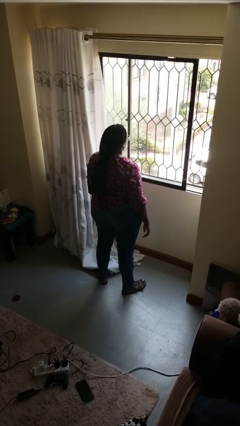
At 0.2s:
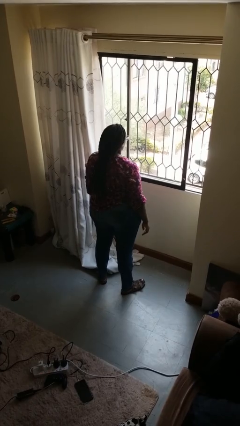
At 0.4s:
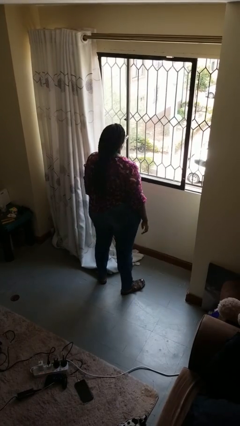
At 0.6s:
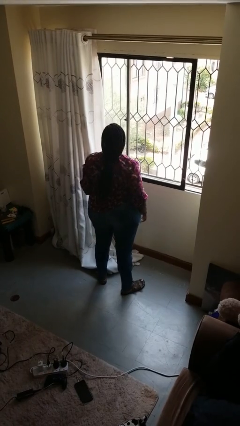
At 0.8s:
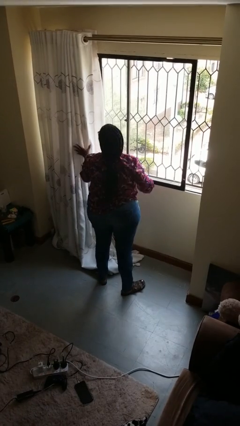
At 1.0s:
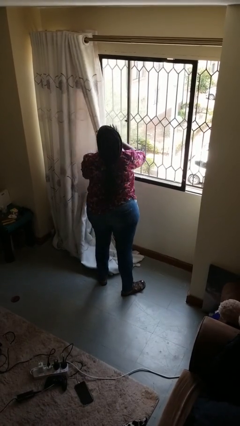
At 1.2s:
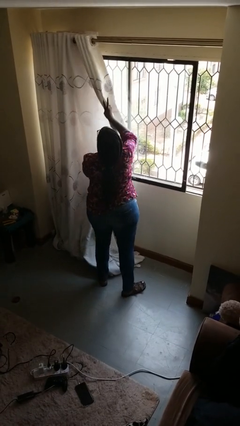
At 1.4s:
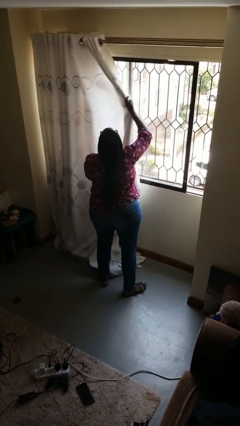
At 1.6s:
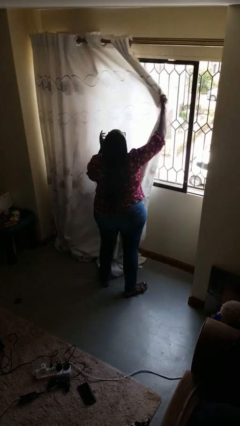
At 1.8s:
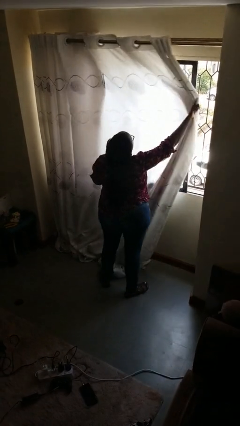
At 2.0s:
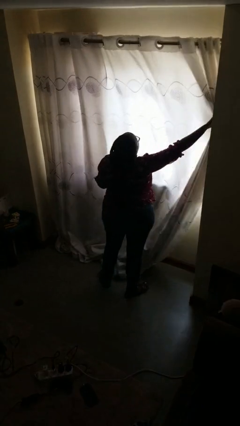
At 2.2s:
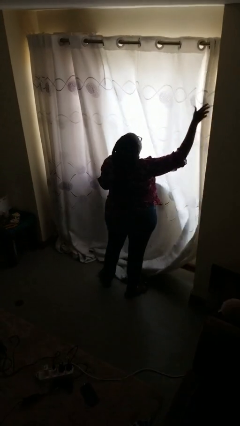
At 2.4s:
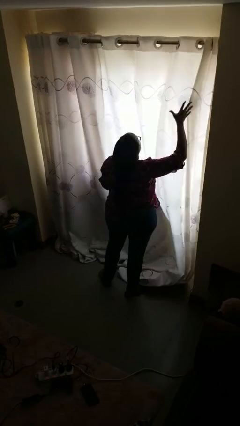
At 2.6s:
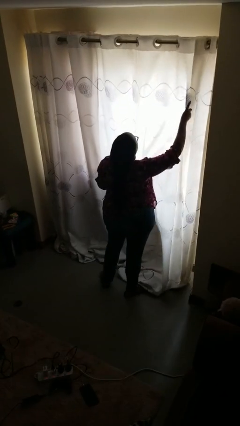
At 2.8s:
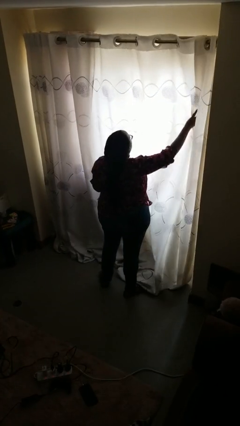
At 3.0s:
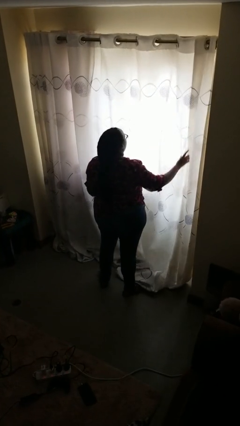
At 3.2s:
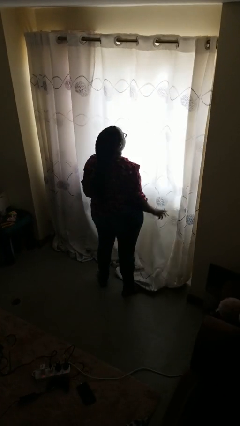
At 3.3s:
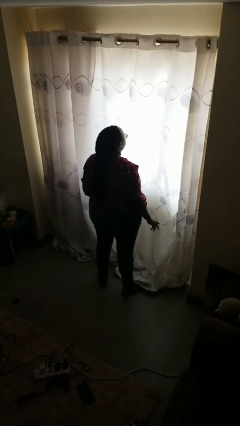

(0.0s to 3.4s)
person closes curtains

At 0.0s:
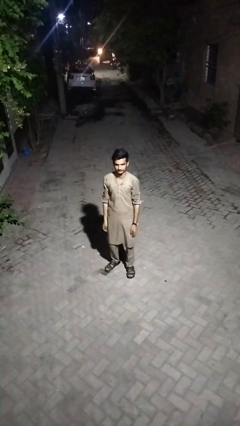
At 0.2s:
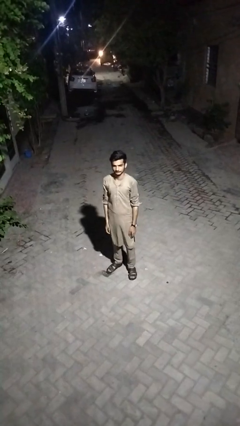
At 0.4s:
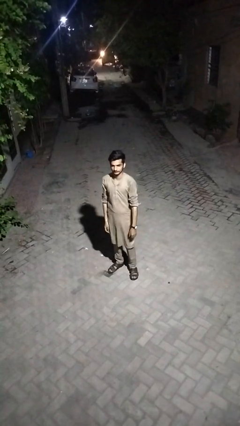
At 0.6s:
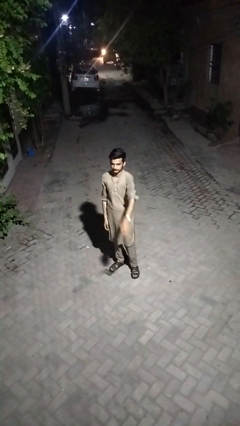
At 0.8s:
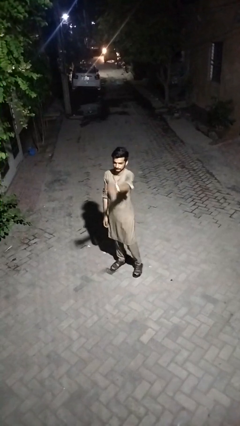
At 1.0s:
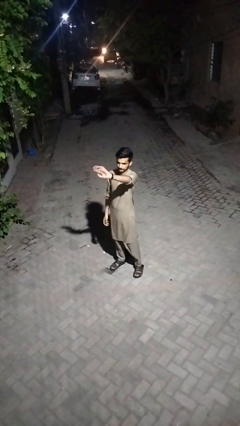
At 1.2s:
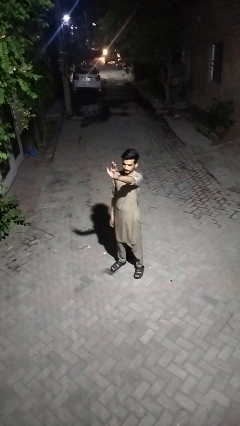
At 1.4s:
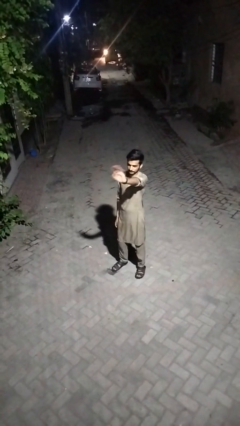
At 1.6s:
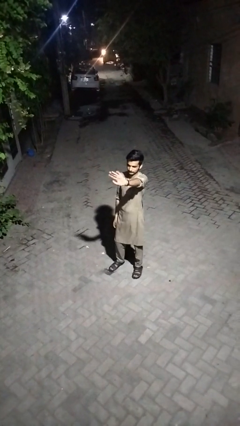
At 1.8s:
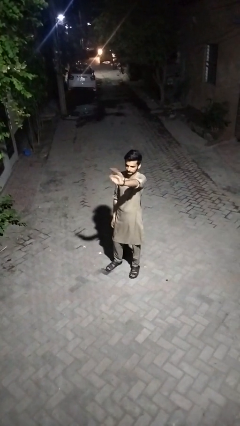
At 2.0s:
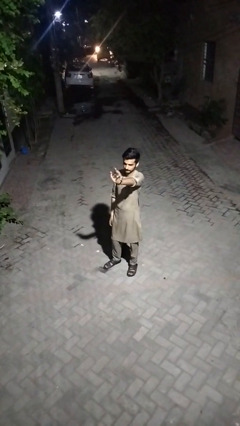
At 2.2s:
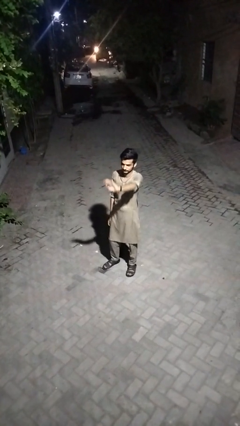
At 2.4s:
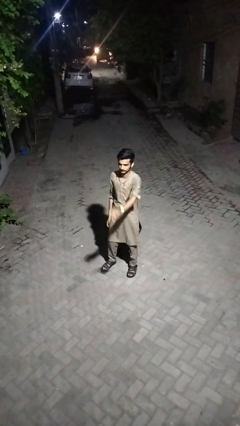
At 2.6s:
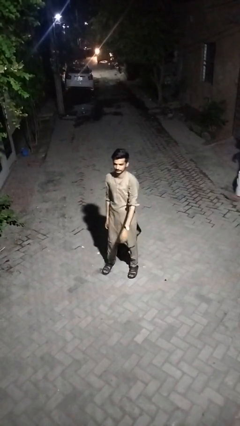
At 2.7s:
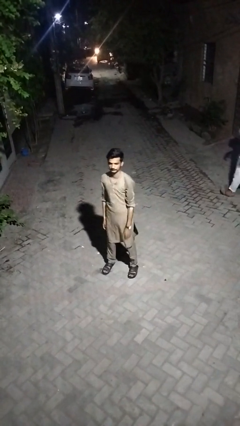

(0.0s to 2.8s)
person waves at person

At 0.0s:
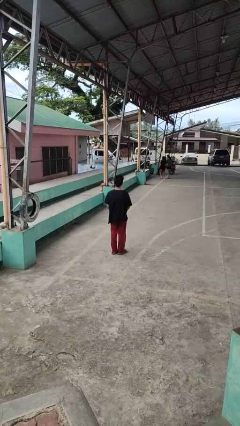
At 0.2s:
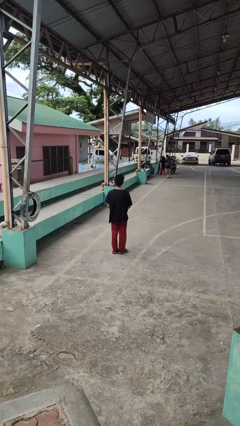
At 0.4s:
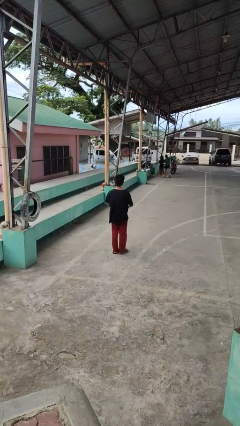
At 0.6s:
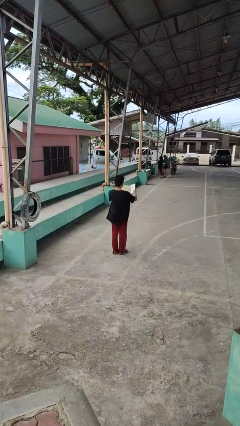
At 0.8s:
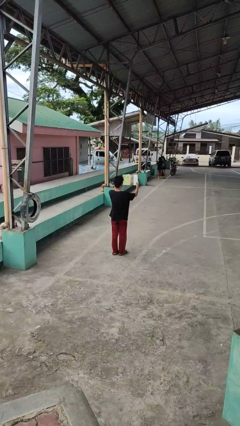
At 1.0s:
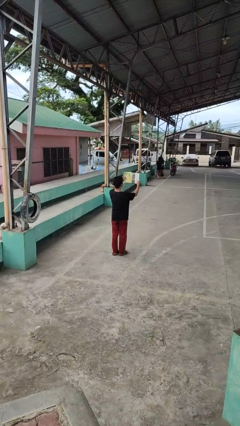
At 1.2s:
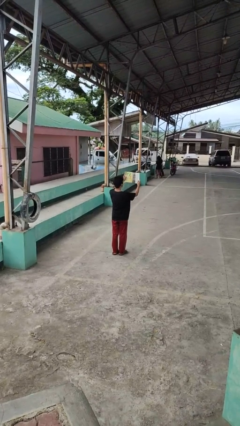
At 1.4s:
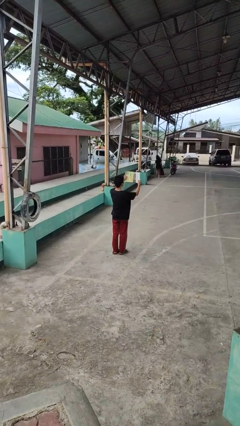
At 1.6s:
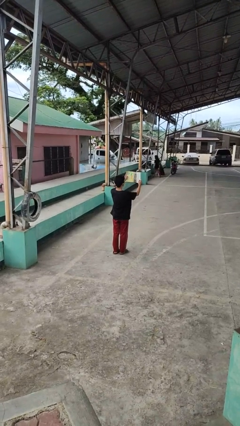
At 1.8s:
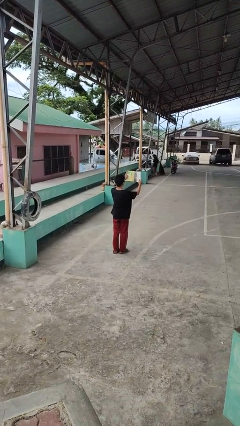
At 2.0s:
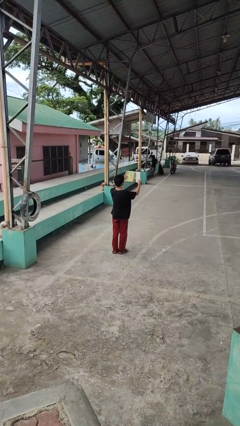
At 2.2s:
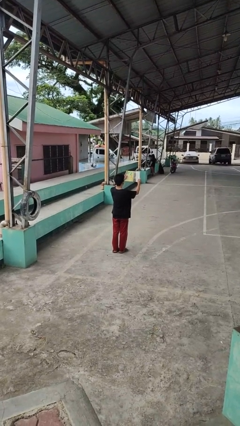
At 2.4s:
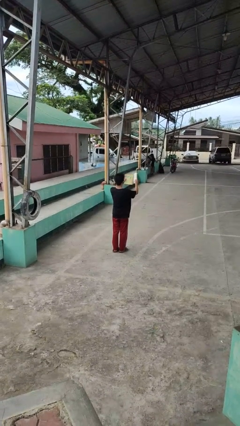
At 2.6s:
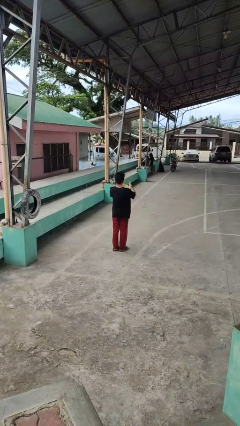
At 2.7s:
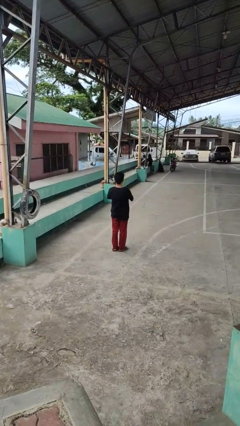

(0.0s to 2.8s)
person reads book

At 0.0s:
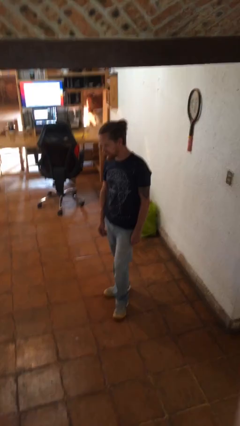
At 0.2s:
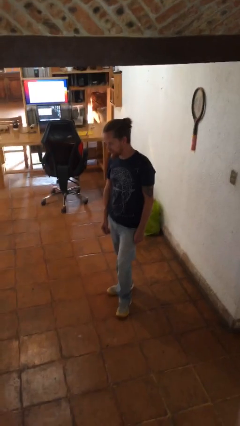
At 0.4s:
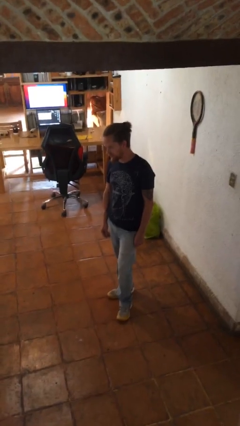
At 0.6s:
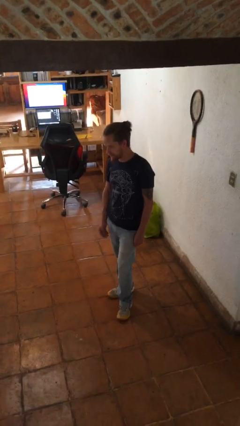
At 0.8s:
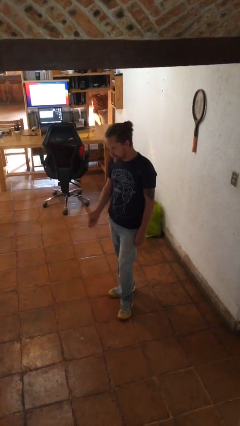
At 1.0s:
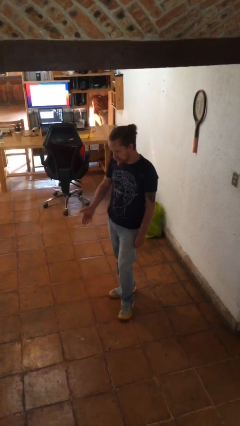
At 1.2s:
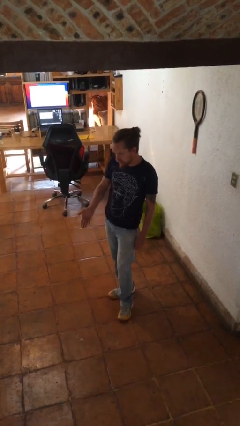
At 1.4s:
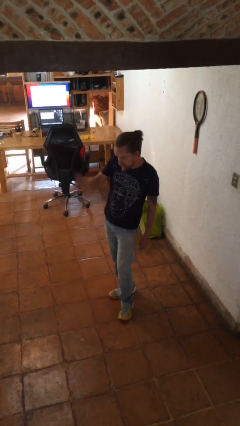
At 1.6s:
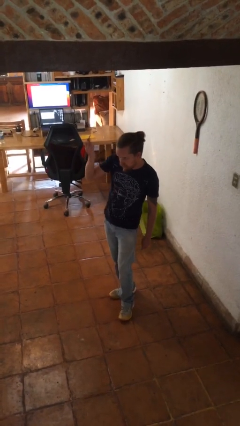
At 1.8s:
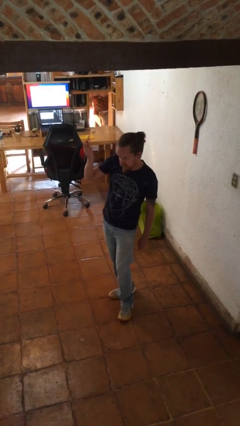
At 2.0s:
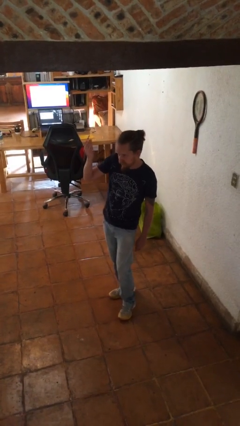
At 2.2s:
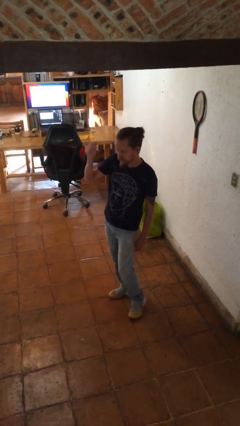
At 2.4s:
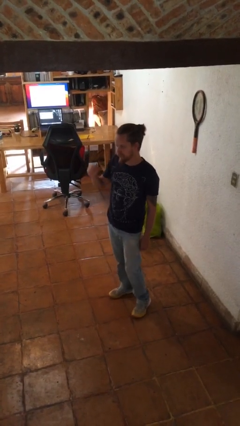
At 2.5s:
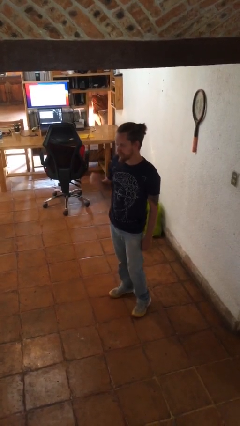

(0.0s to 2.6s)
person gestures swipe up

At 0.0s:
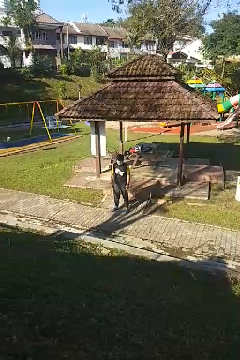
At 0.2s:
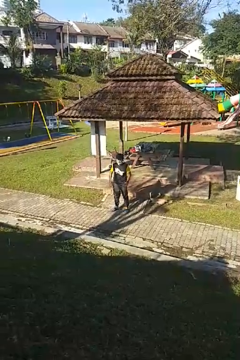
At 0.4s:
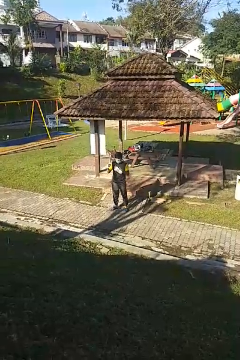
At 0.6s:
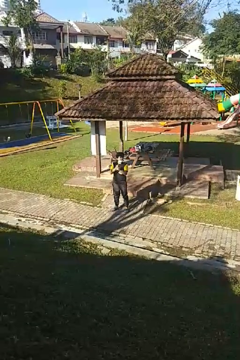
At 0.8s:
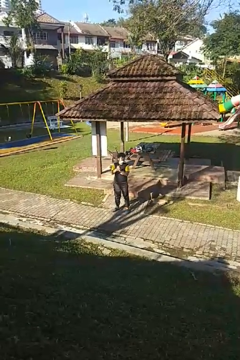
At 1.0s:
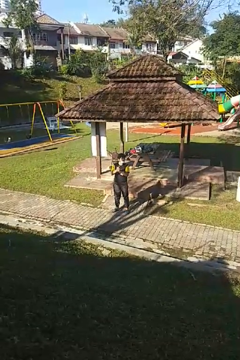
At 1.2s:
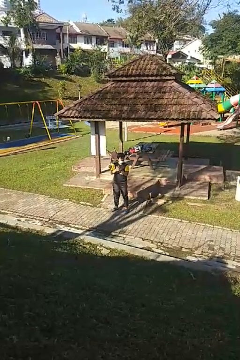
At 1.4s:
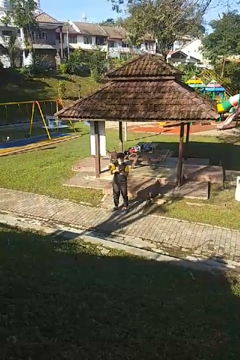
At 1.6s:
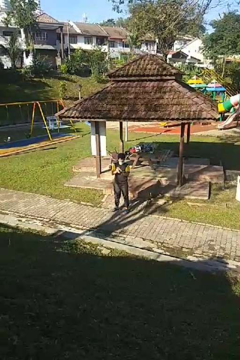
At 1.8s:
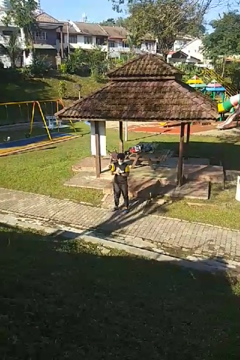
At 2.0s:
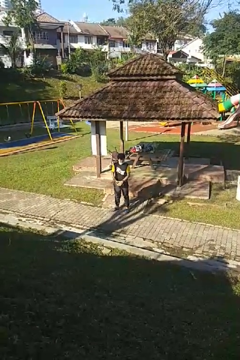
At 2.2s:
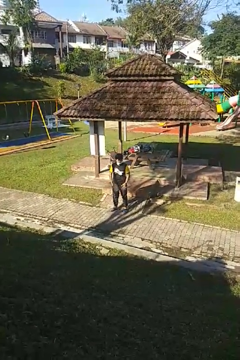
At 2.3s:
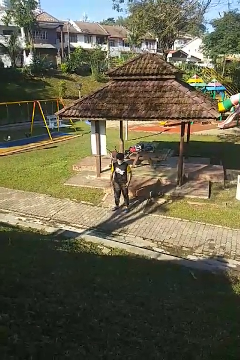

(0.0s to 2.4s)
person claps hands

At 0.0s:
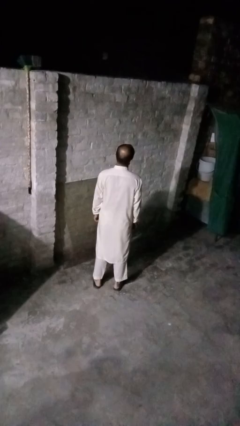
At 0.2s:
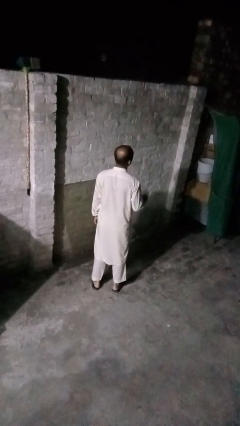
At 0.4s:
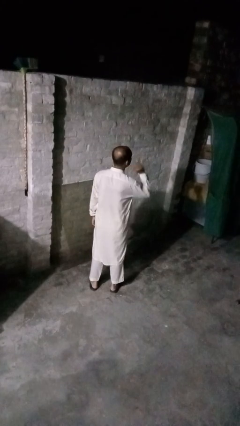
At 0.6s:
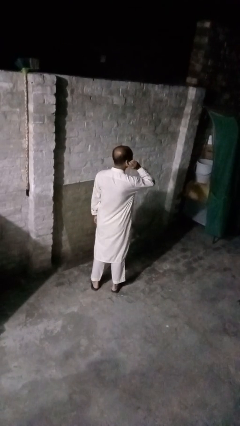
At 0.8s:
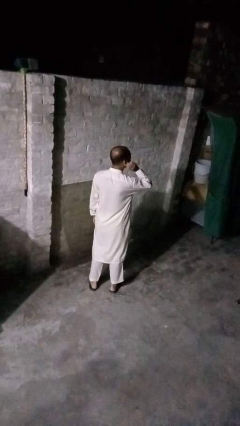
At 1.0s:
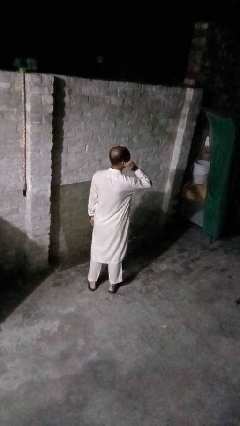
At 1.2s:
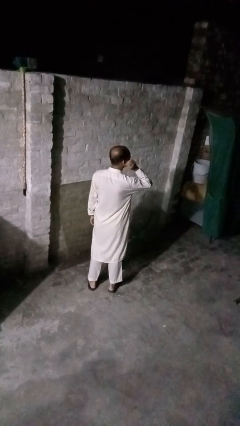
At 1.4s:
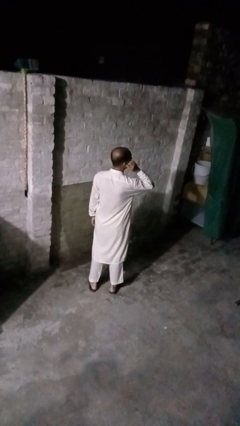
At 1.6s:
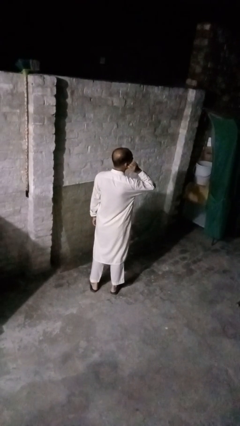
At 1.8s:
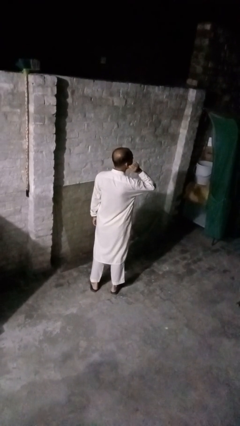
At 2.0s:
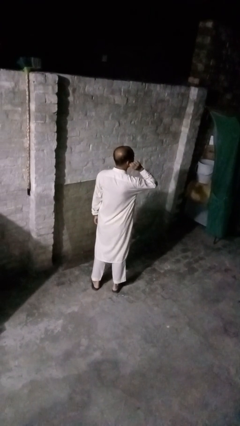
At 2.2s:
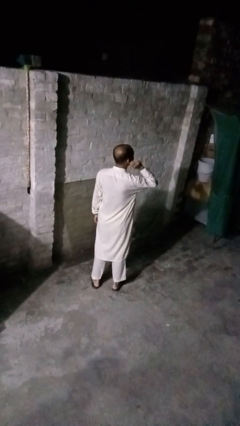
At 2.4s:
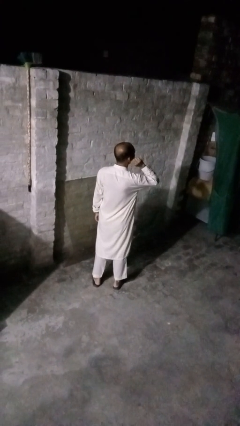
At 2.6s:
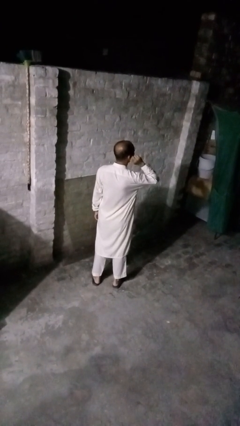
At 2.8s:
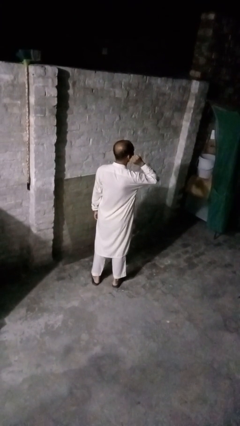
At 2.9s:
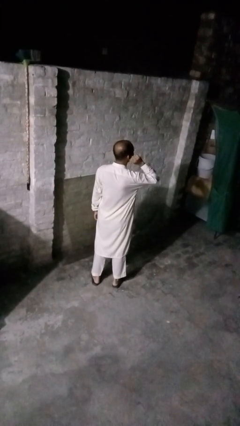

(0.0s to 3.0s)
person touches earlobe

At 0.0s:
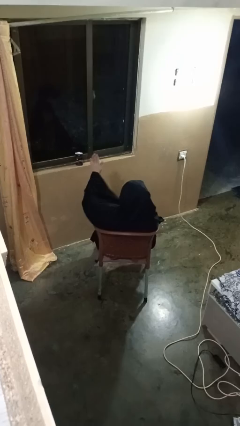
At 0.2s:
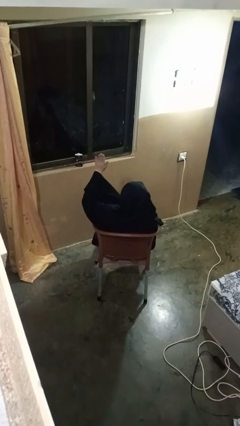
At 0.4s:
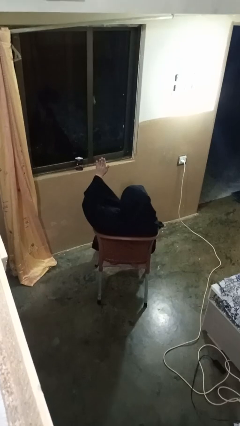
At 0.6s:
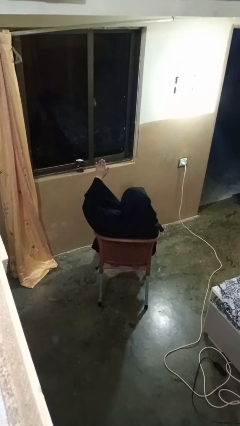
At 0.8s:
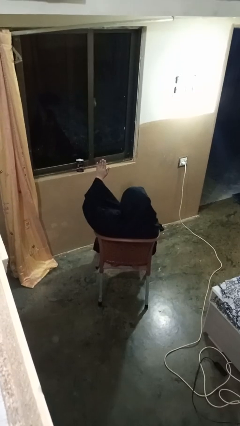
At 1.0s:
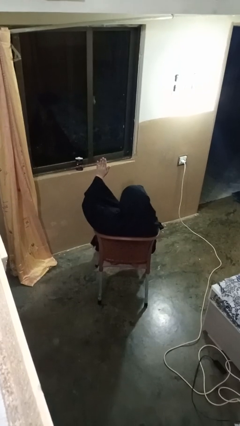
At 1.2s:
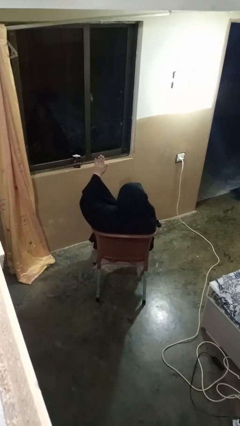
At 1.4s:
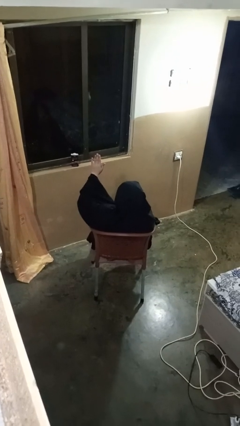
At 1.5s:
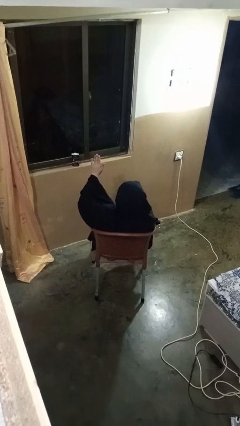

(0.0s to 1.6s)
person gestures raise hand
